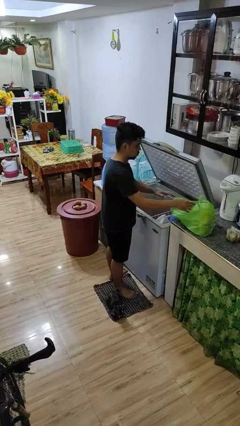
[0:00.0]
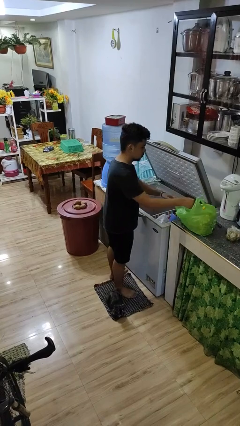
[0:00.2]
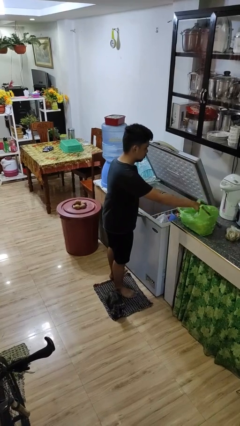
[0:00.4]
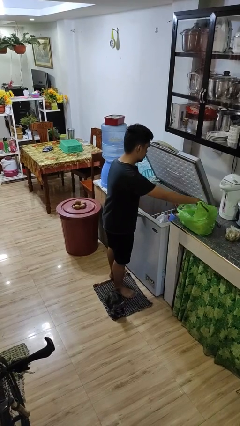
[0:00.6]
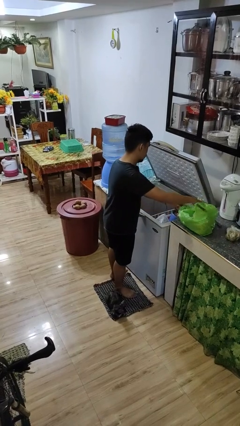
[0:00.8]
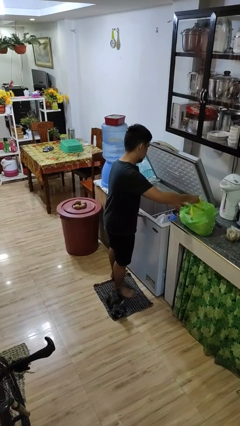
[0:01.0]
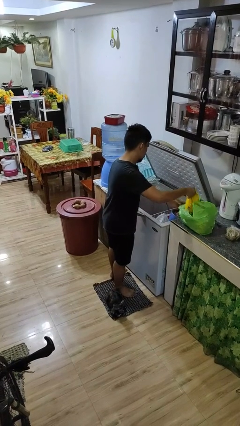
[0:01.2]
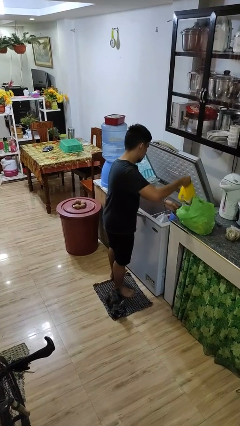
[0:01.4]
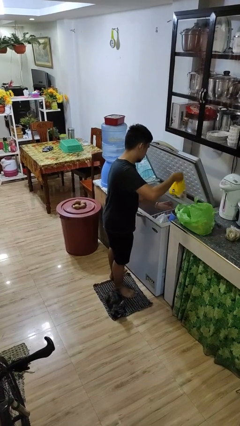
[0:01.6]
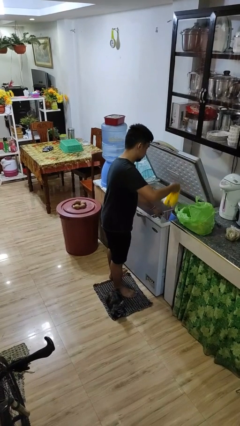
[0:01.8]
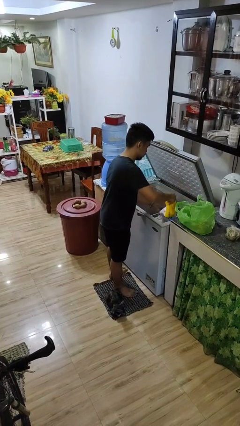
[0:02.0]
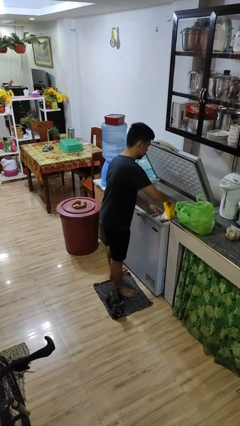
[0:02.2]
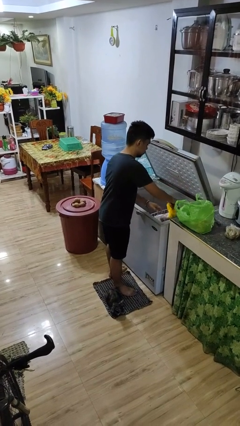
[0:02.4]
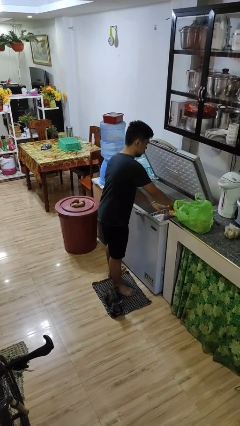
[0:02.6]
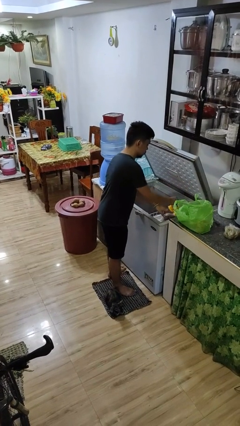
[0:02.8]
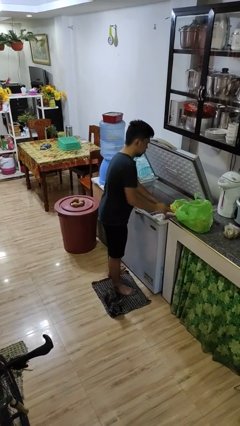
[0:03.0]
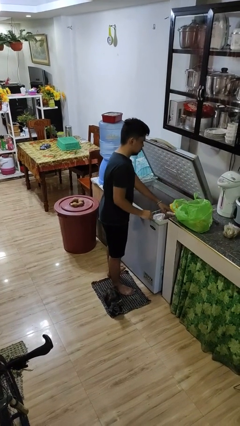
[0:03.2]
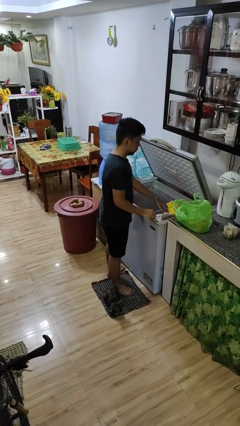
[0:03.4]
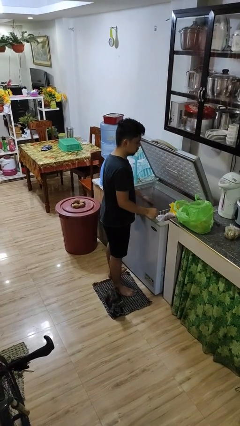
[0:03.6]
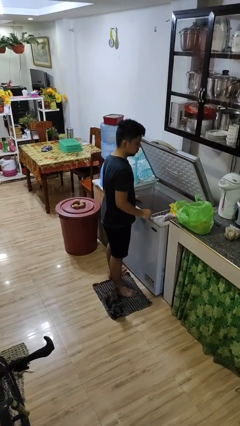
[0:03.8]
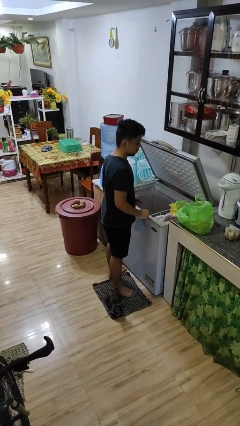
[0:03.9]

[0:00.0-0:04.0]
person loads groceries into refrigerator

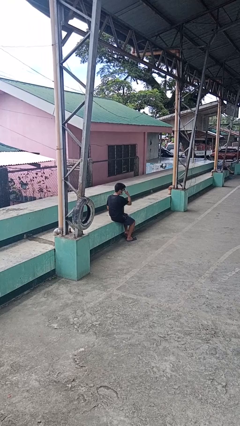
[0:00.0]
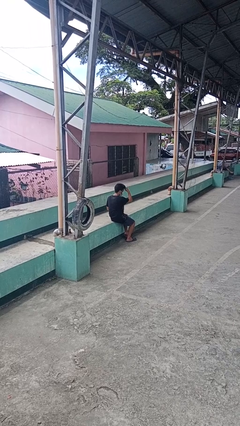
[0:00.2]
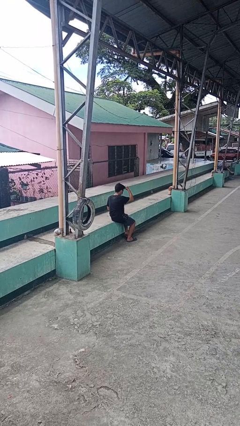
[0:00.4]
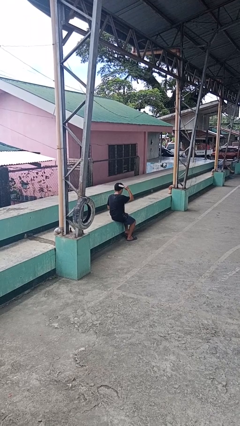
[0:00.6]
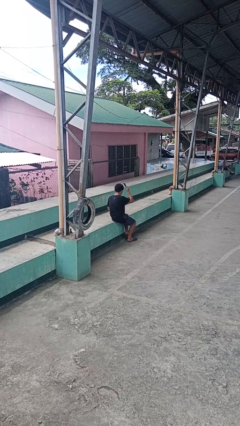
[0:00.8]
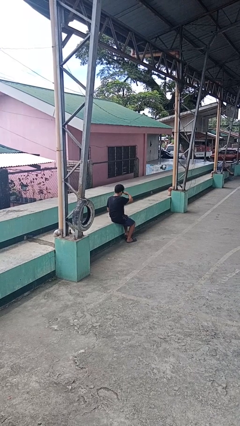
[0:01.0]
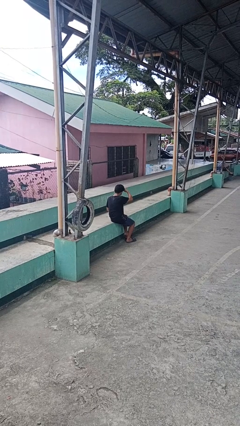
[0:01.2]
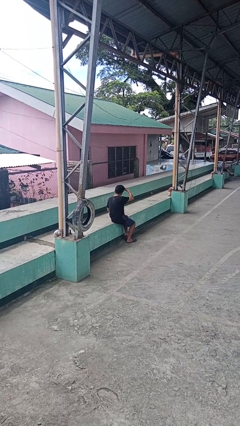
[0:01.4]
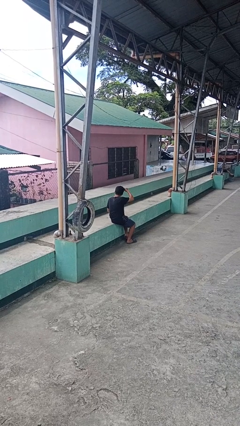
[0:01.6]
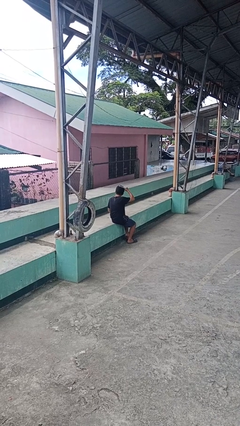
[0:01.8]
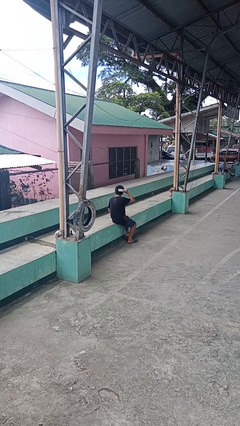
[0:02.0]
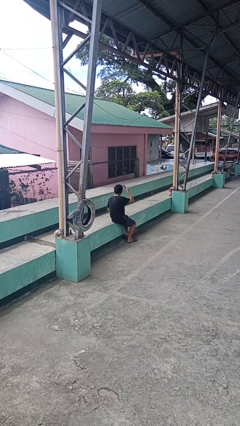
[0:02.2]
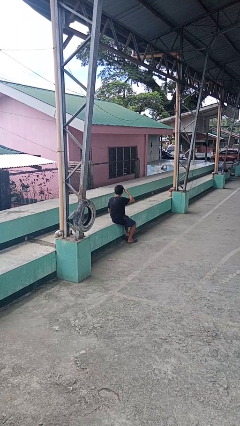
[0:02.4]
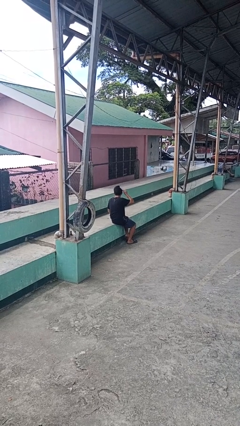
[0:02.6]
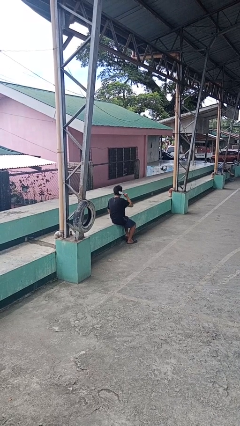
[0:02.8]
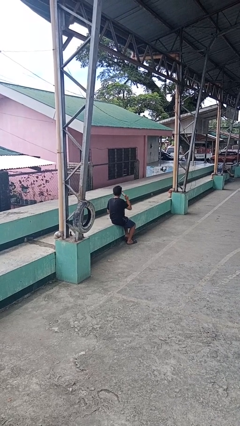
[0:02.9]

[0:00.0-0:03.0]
person brushes hair

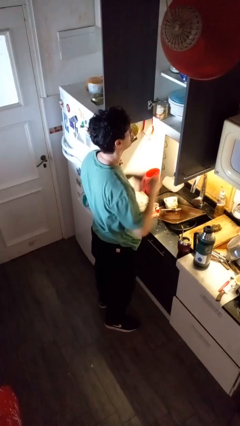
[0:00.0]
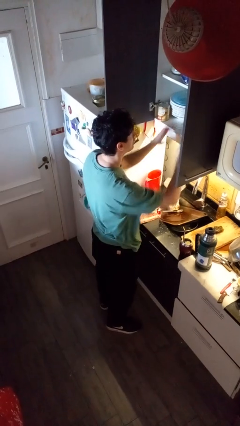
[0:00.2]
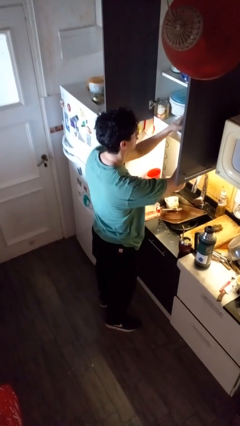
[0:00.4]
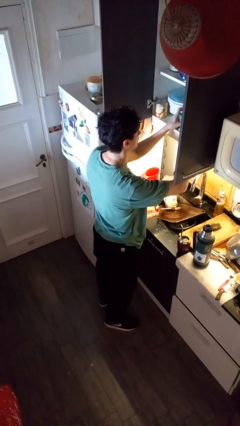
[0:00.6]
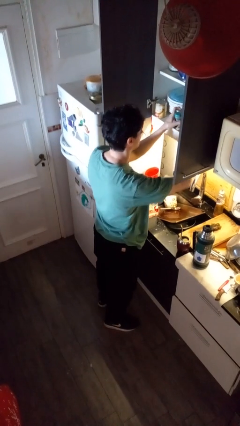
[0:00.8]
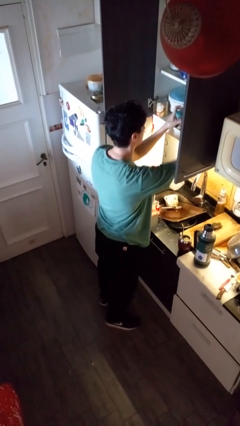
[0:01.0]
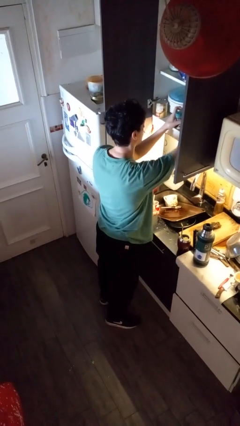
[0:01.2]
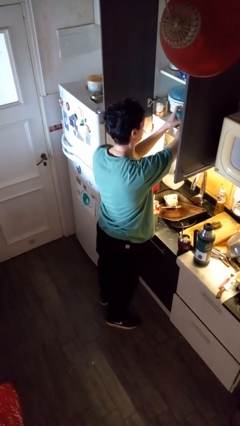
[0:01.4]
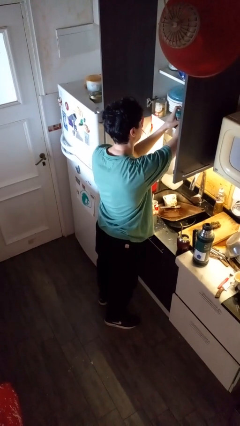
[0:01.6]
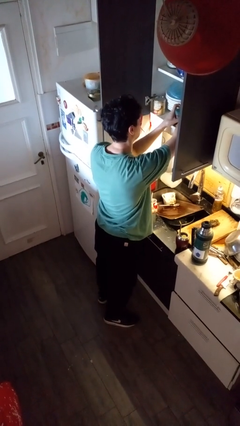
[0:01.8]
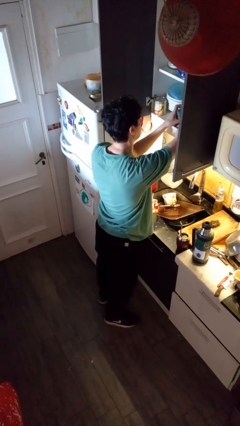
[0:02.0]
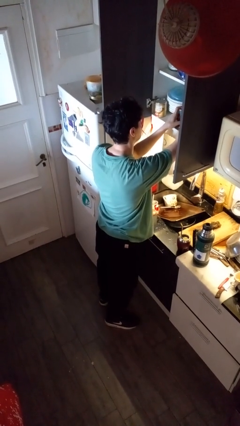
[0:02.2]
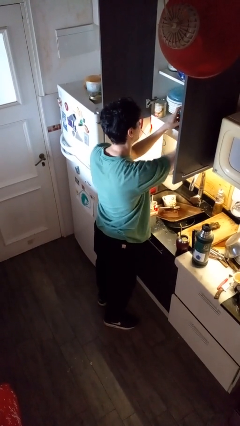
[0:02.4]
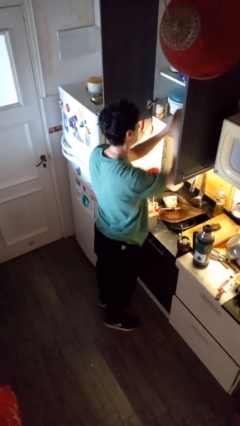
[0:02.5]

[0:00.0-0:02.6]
person searches in kitchen drawer

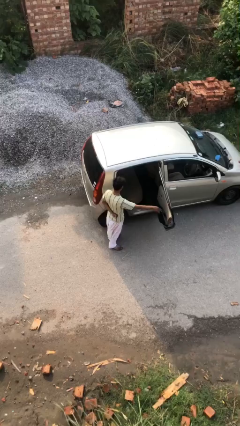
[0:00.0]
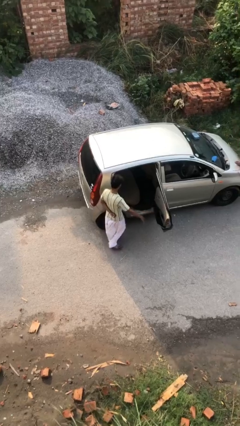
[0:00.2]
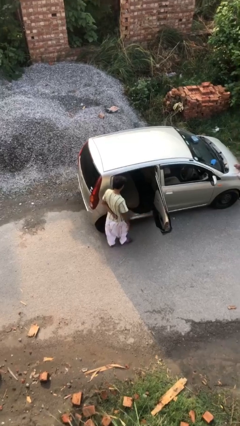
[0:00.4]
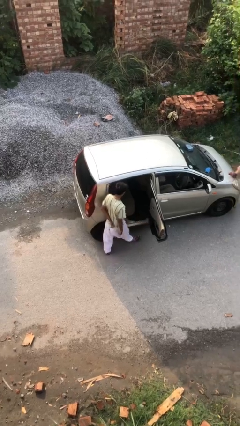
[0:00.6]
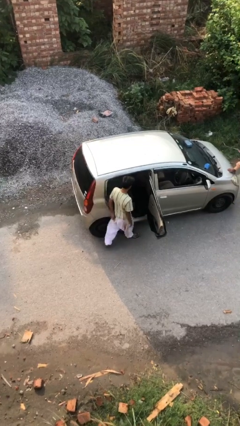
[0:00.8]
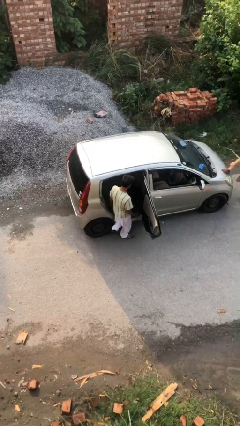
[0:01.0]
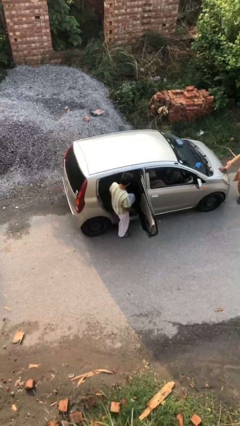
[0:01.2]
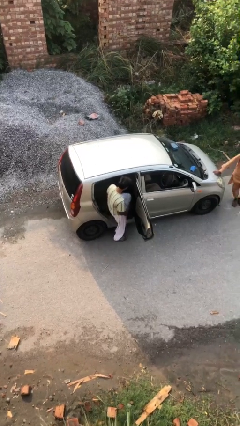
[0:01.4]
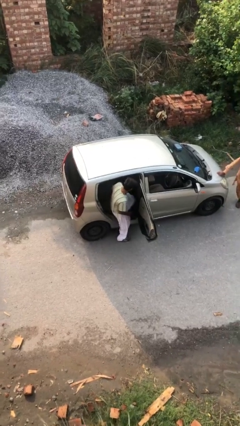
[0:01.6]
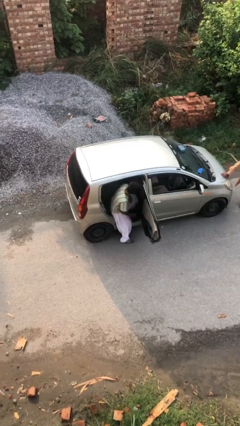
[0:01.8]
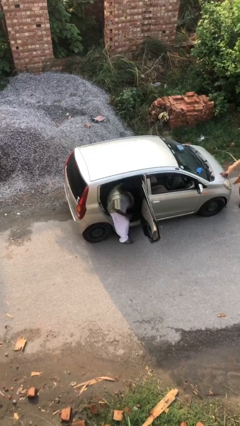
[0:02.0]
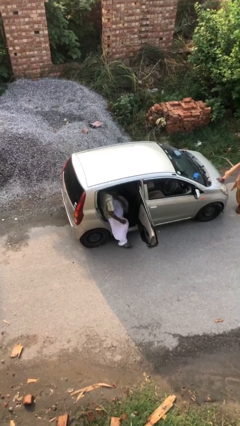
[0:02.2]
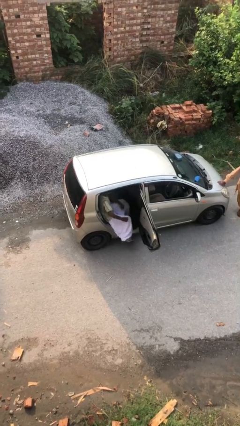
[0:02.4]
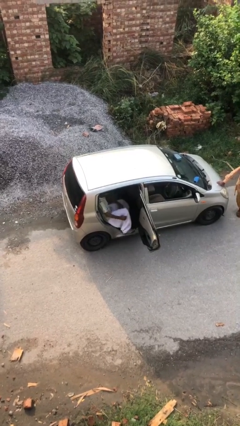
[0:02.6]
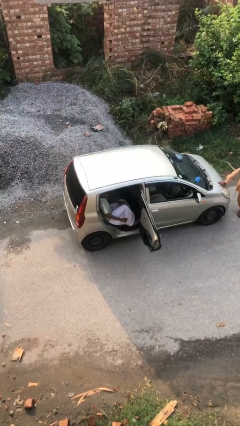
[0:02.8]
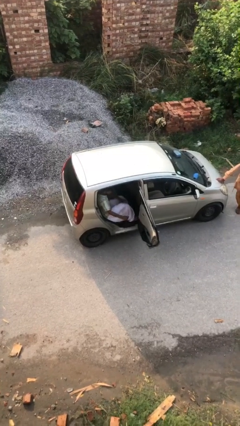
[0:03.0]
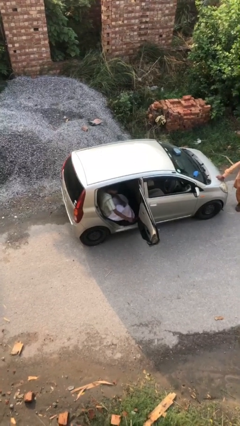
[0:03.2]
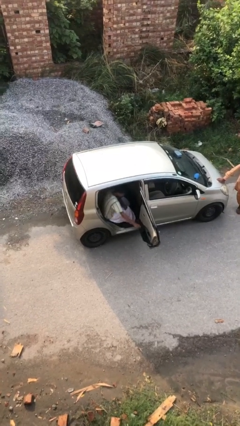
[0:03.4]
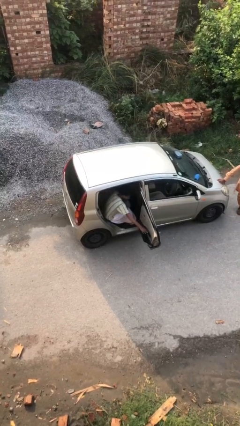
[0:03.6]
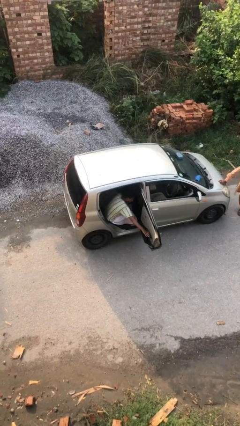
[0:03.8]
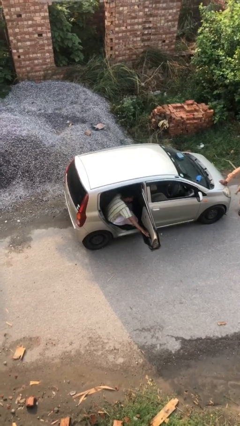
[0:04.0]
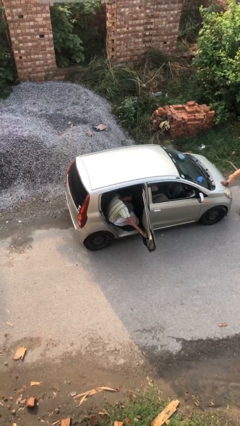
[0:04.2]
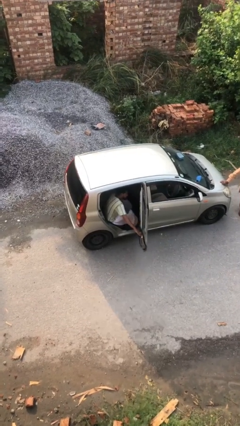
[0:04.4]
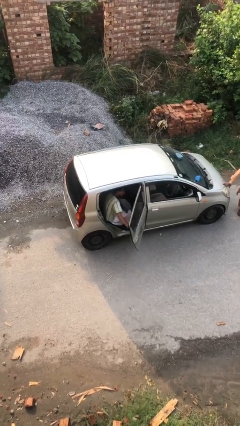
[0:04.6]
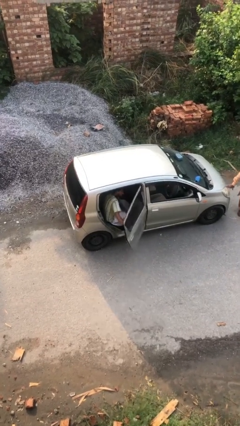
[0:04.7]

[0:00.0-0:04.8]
person enters car

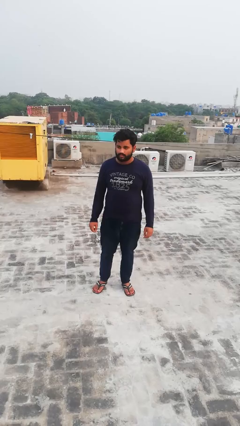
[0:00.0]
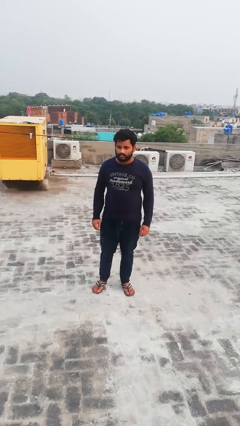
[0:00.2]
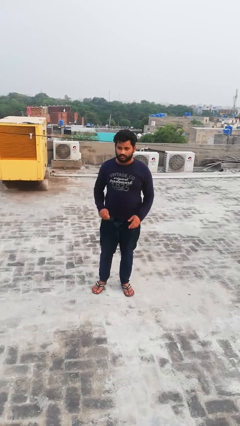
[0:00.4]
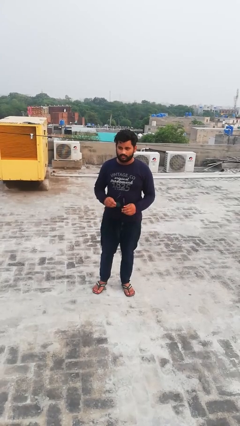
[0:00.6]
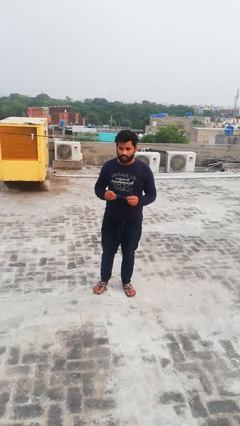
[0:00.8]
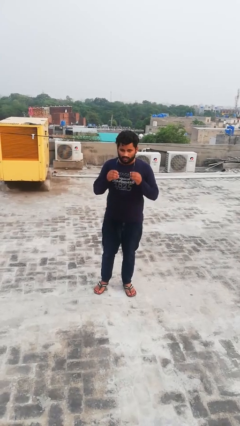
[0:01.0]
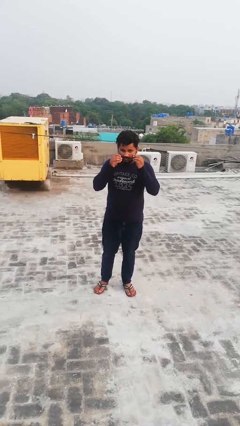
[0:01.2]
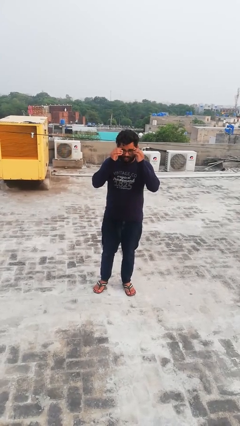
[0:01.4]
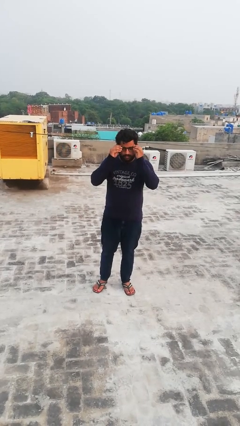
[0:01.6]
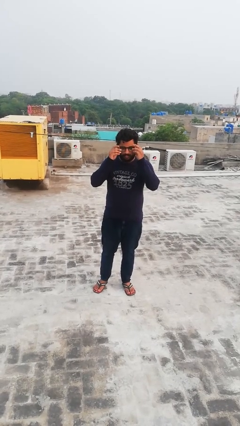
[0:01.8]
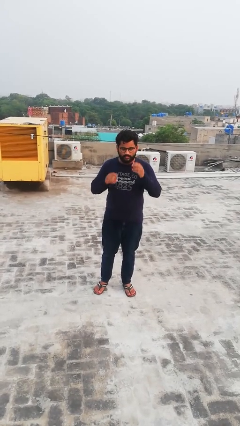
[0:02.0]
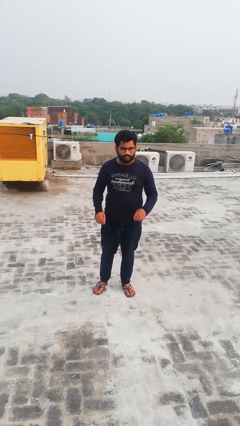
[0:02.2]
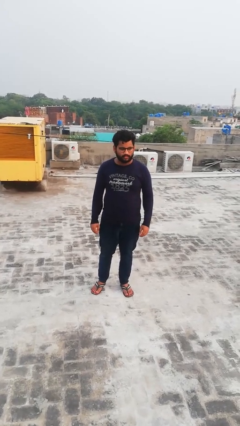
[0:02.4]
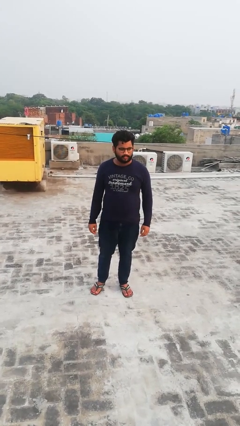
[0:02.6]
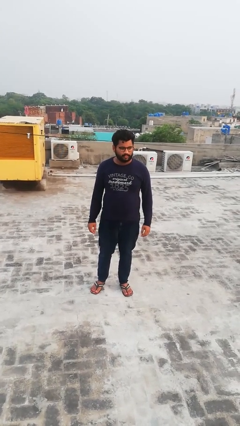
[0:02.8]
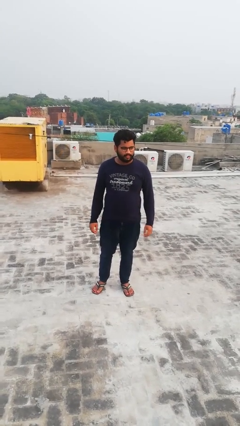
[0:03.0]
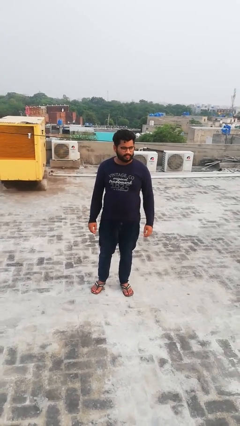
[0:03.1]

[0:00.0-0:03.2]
person puts on glasses
